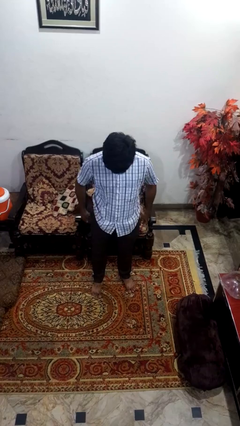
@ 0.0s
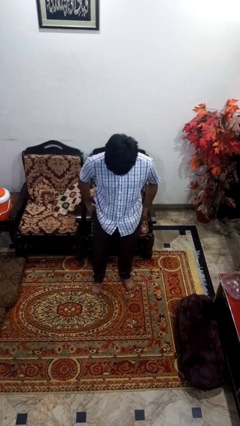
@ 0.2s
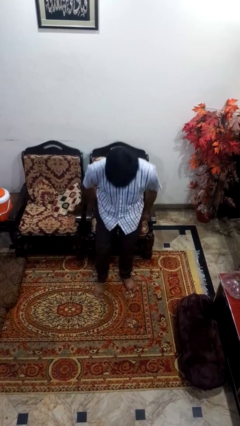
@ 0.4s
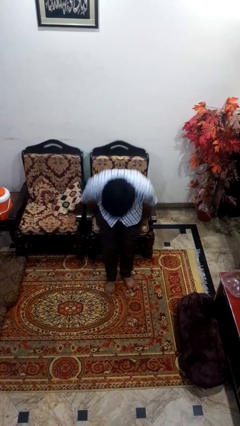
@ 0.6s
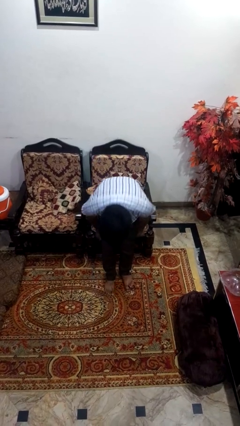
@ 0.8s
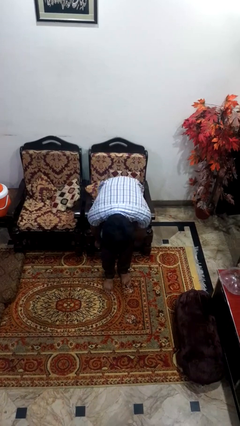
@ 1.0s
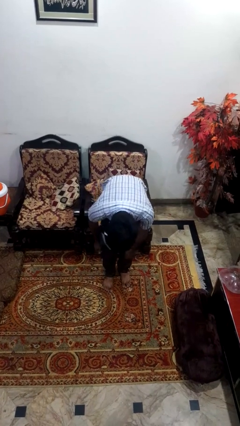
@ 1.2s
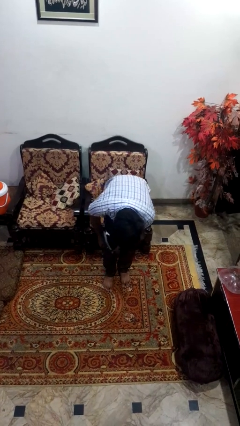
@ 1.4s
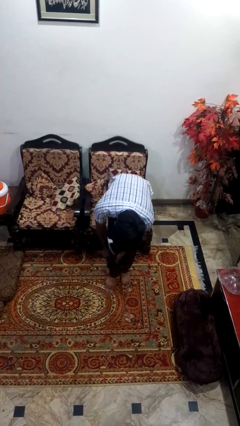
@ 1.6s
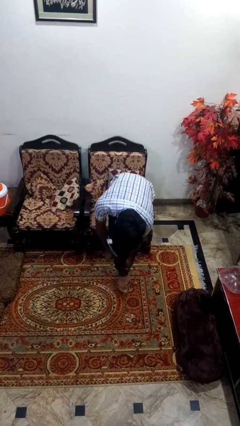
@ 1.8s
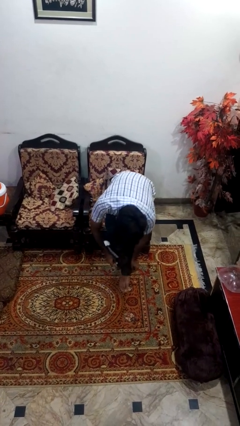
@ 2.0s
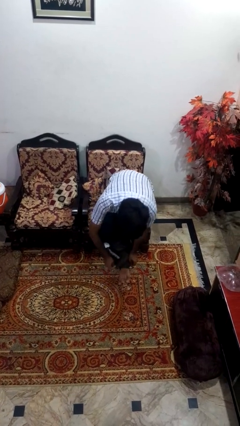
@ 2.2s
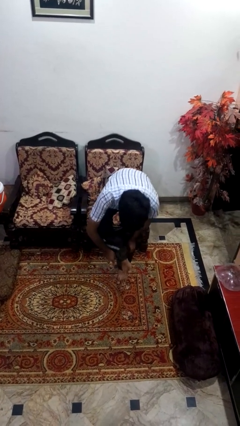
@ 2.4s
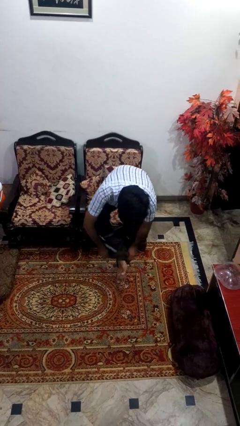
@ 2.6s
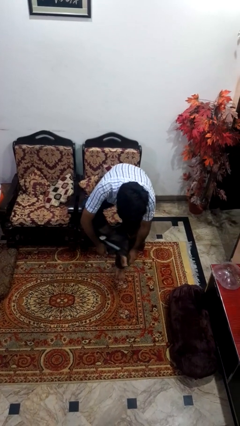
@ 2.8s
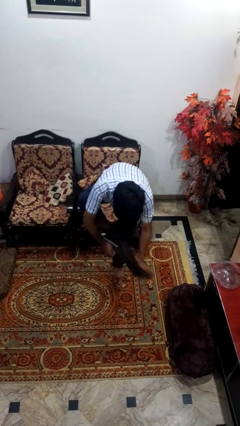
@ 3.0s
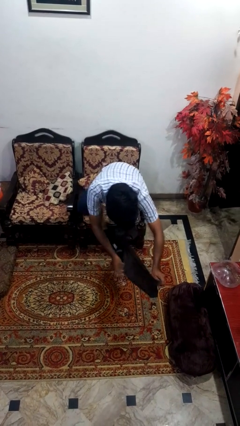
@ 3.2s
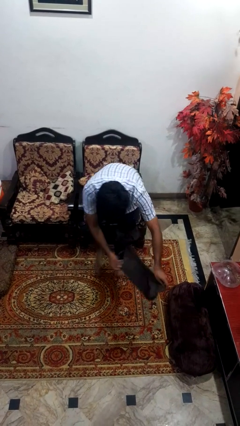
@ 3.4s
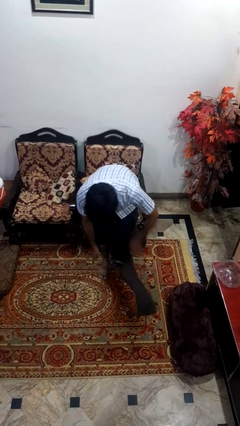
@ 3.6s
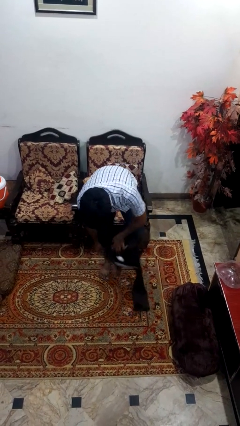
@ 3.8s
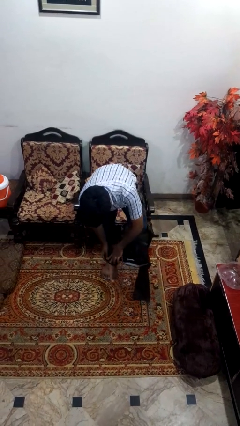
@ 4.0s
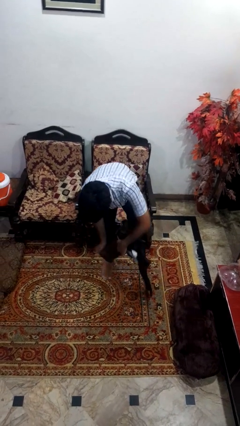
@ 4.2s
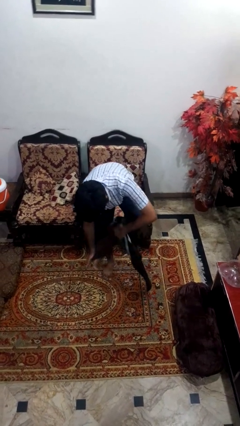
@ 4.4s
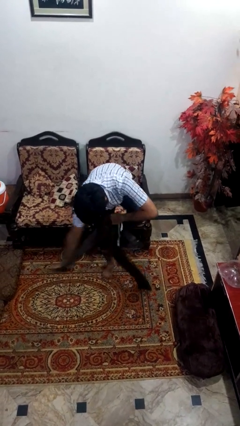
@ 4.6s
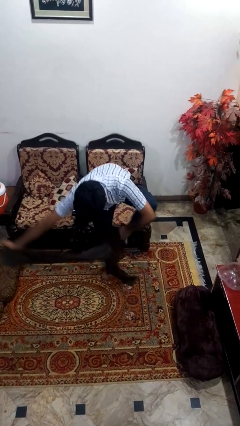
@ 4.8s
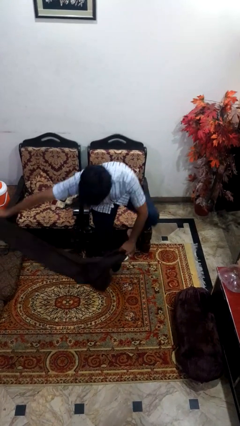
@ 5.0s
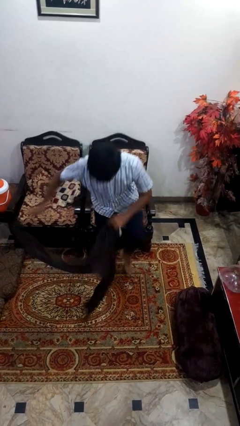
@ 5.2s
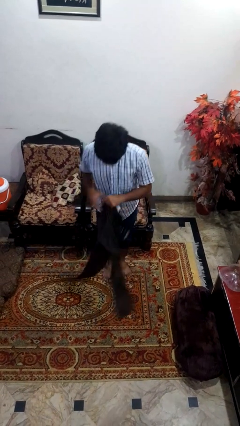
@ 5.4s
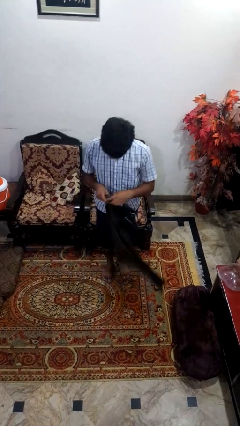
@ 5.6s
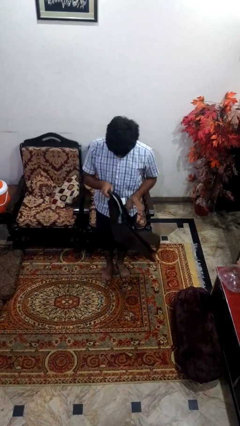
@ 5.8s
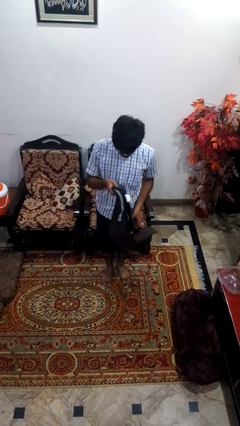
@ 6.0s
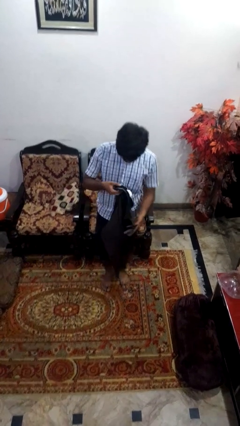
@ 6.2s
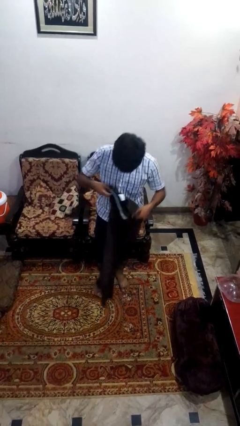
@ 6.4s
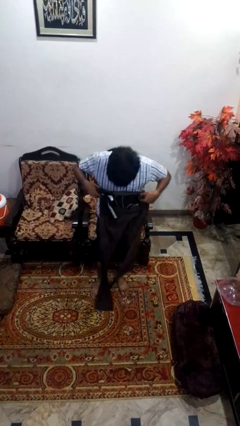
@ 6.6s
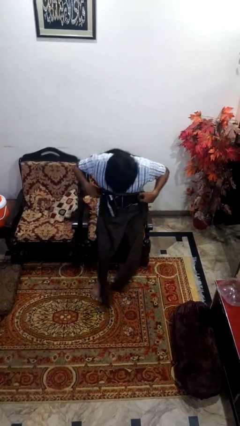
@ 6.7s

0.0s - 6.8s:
person takes off pants

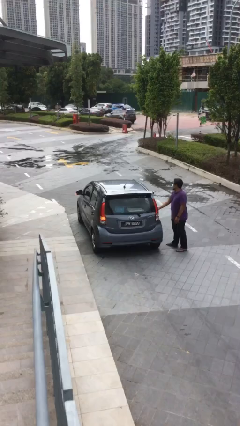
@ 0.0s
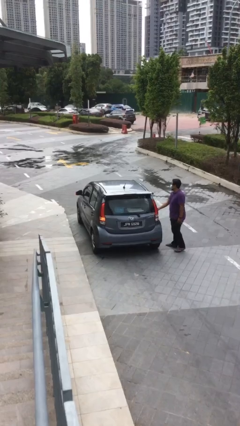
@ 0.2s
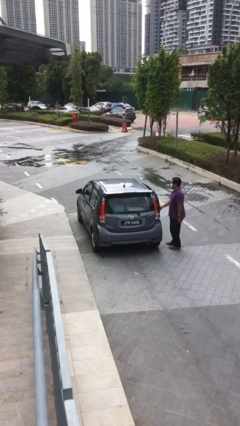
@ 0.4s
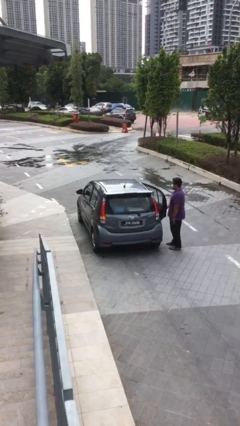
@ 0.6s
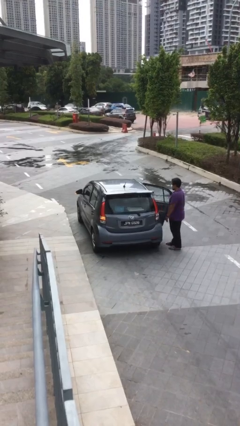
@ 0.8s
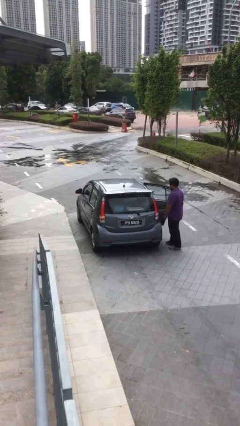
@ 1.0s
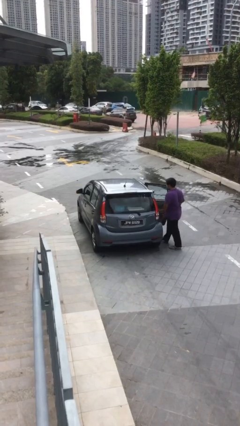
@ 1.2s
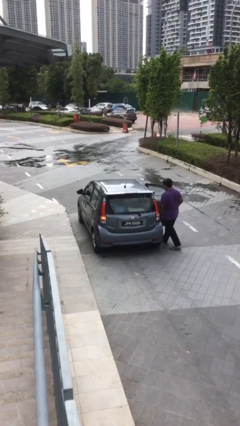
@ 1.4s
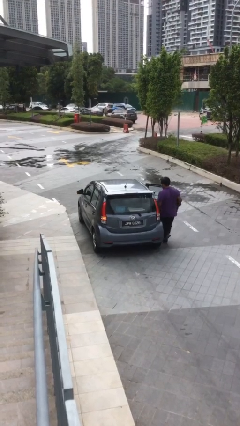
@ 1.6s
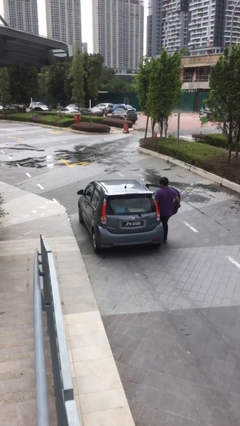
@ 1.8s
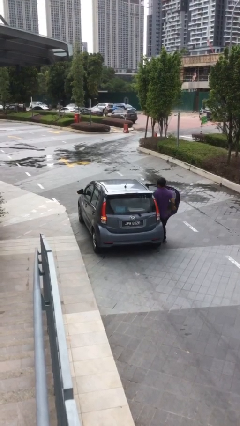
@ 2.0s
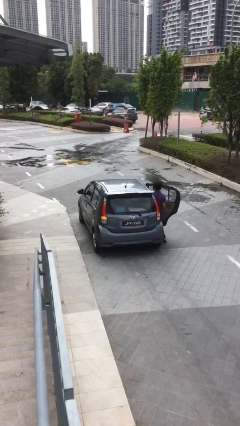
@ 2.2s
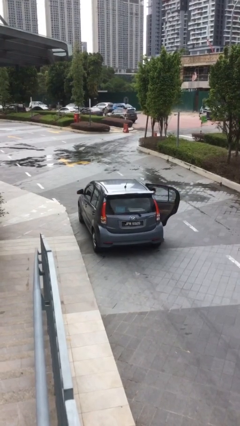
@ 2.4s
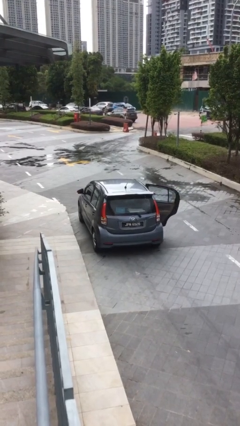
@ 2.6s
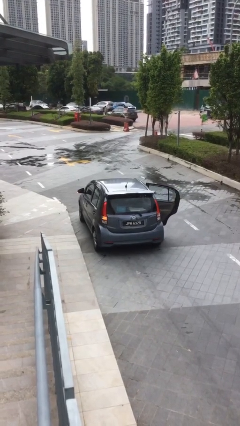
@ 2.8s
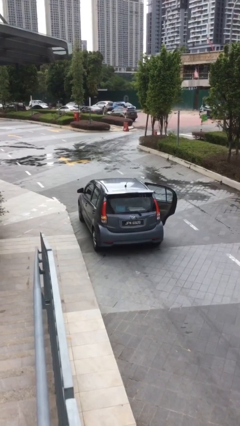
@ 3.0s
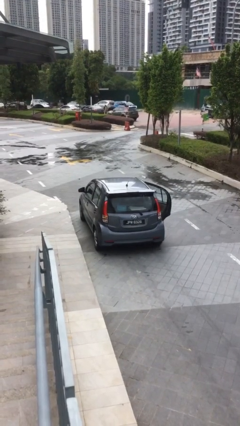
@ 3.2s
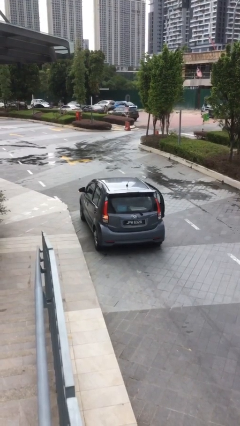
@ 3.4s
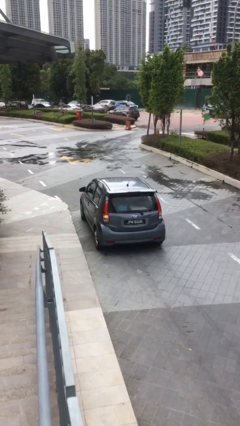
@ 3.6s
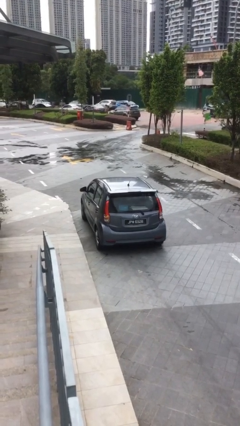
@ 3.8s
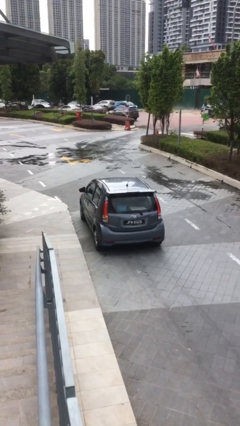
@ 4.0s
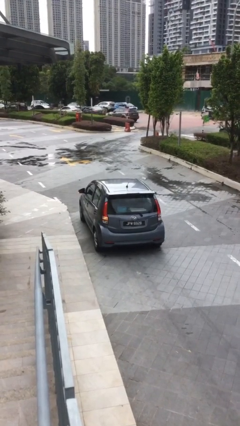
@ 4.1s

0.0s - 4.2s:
car picks up person

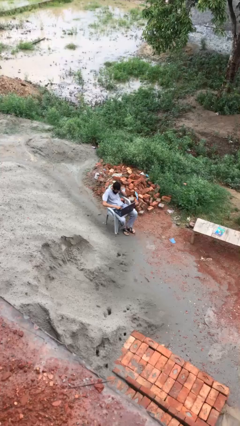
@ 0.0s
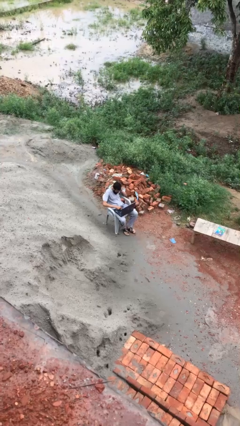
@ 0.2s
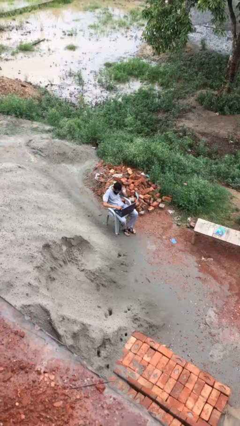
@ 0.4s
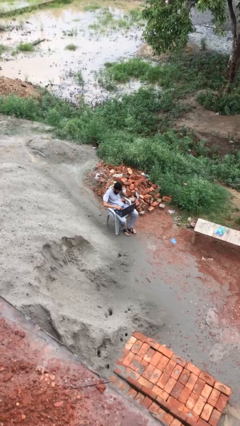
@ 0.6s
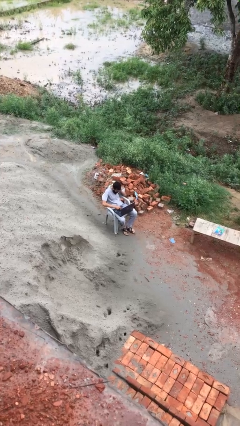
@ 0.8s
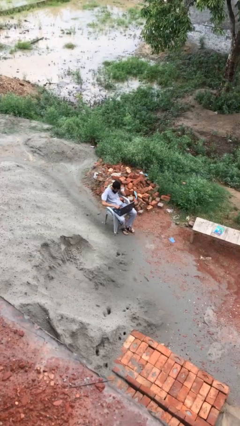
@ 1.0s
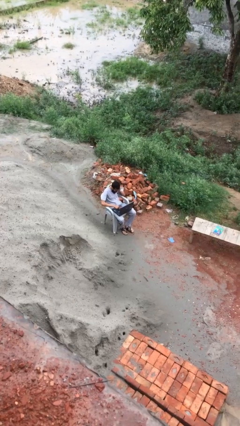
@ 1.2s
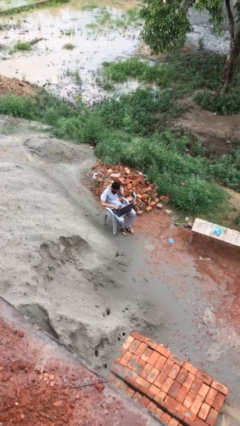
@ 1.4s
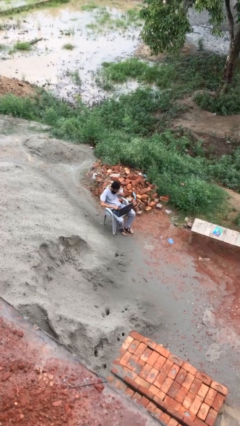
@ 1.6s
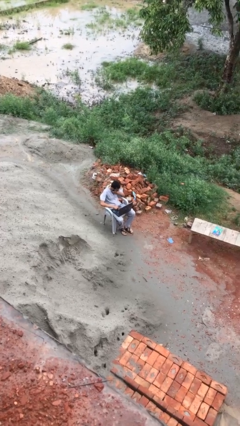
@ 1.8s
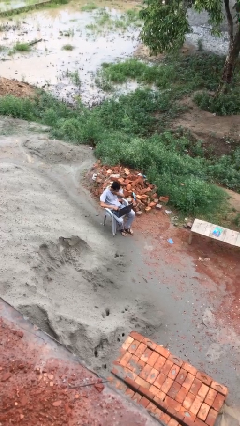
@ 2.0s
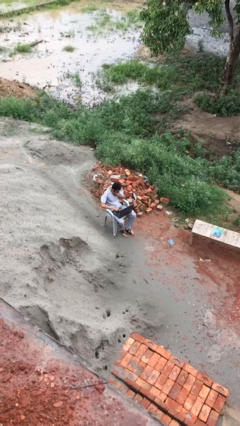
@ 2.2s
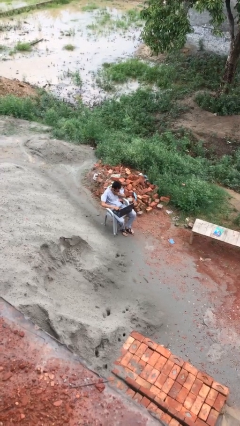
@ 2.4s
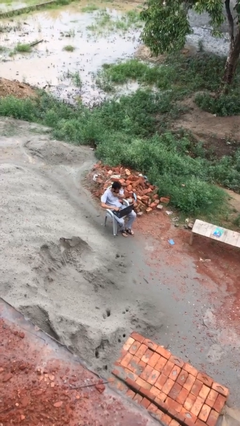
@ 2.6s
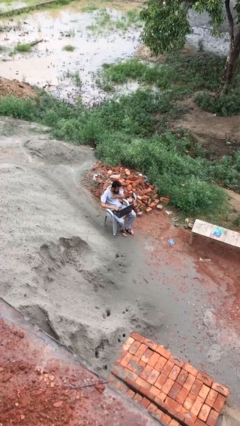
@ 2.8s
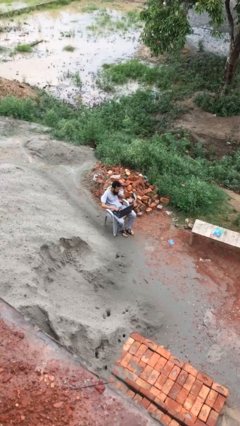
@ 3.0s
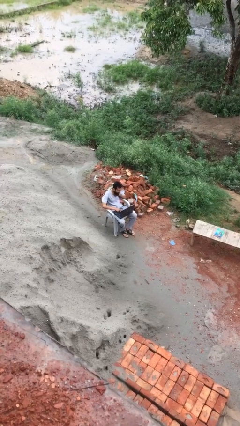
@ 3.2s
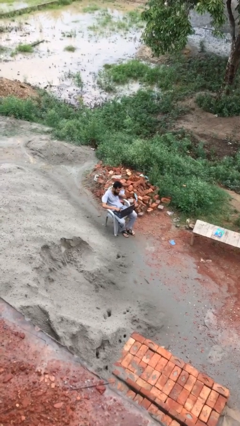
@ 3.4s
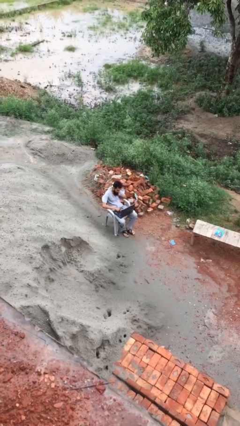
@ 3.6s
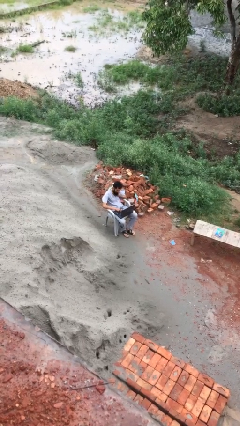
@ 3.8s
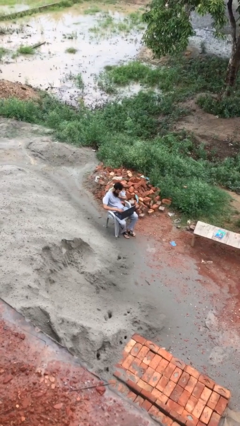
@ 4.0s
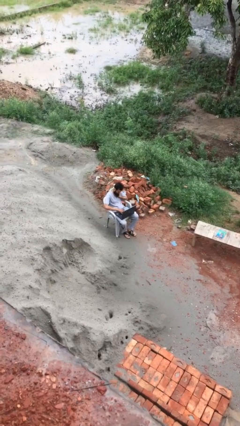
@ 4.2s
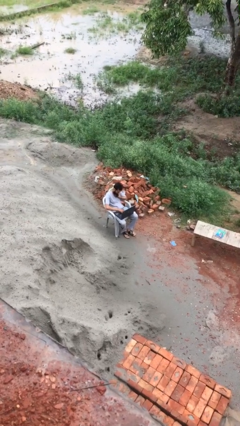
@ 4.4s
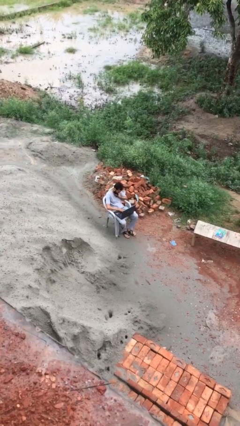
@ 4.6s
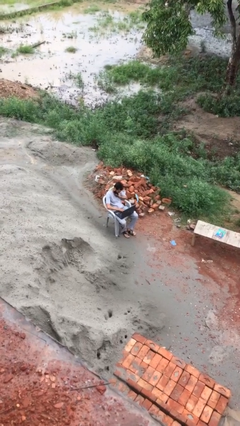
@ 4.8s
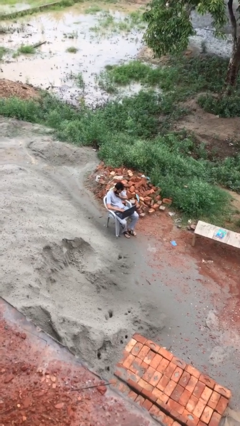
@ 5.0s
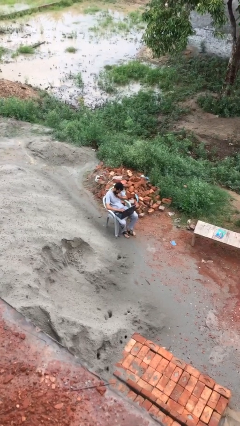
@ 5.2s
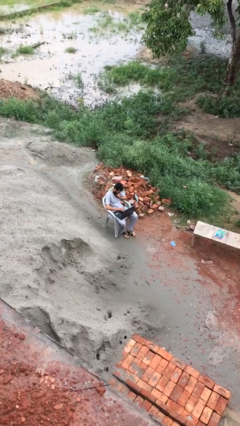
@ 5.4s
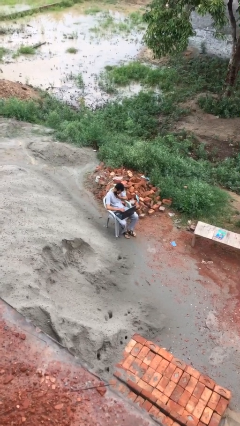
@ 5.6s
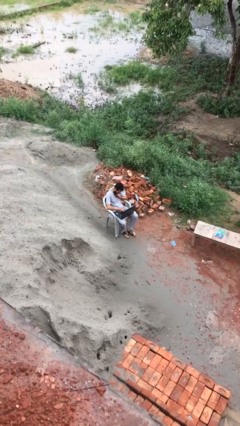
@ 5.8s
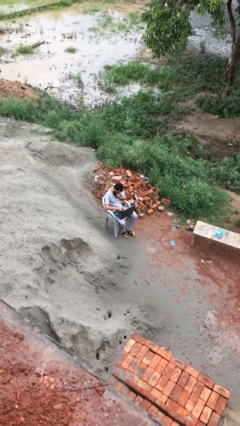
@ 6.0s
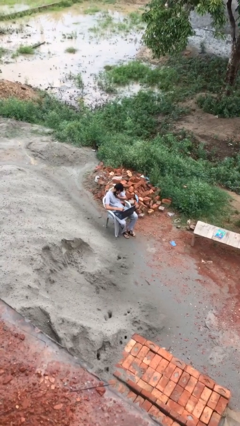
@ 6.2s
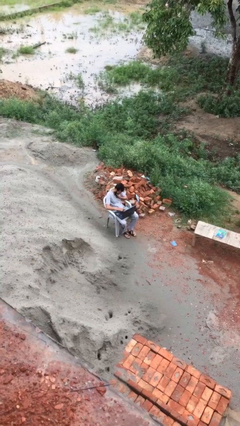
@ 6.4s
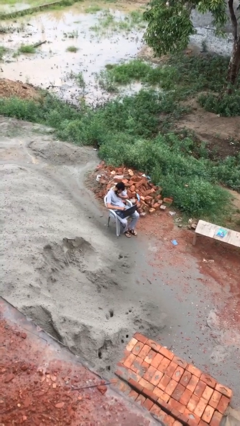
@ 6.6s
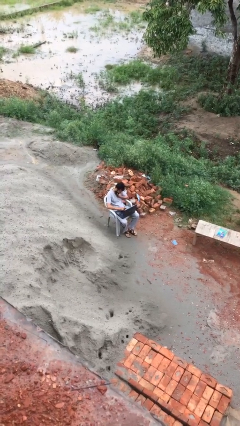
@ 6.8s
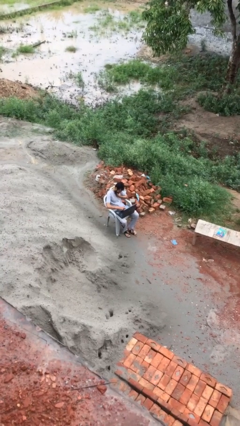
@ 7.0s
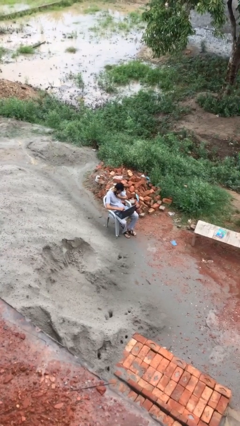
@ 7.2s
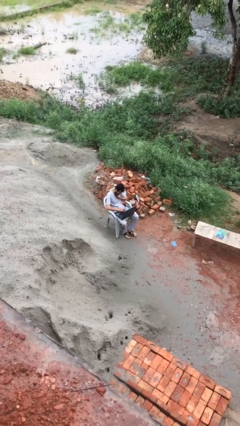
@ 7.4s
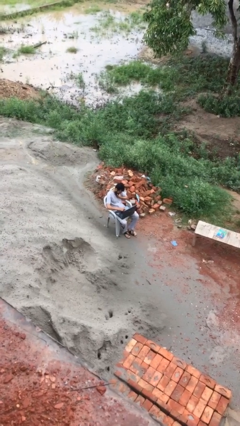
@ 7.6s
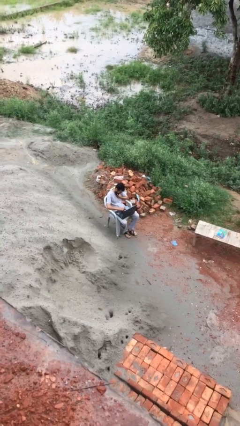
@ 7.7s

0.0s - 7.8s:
person interacts with laptop
